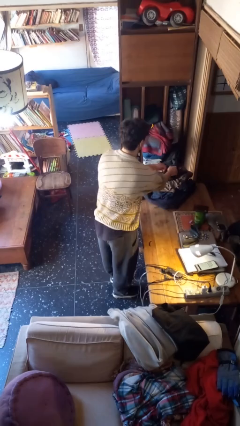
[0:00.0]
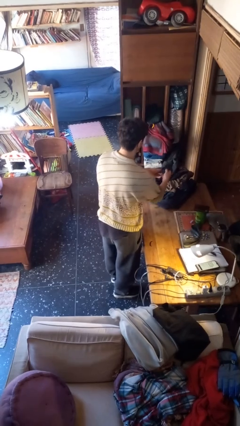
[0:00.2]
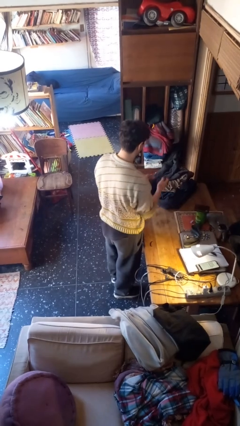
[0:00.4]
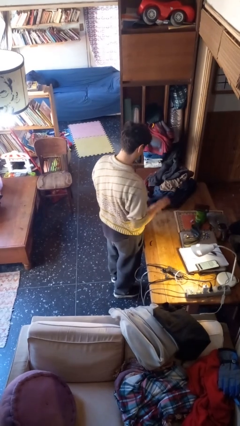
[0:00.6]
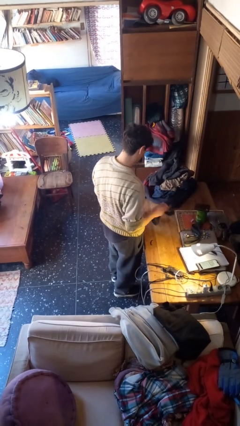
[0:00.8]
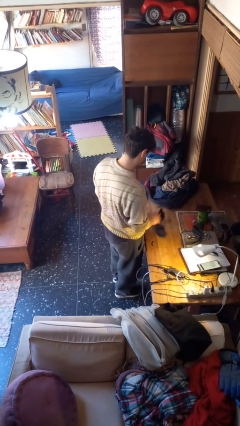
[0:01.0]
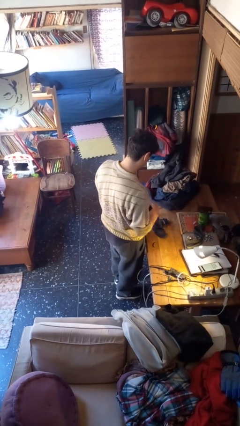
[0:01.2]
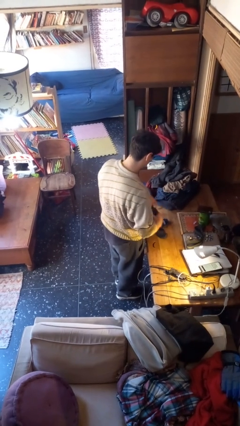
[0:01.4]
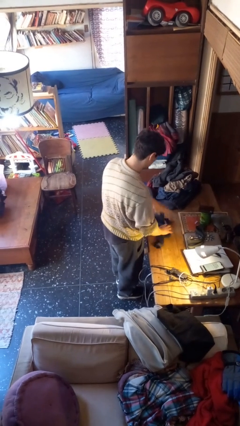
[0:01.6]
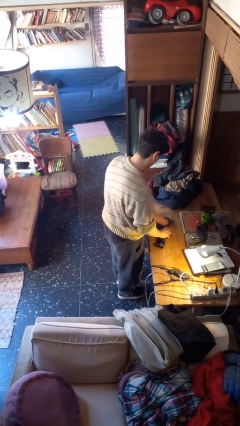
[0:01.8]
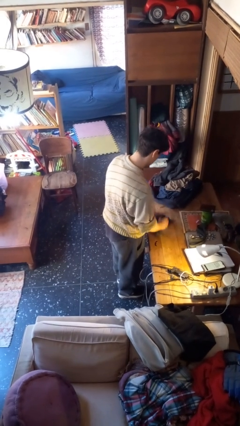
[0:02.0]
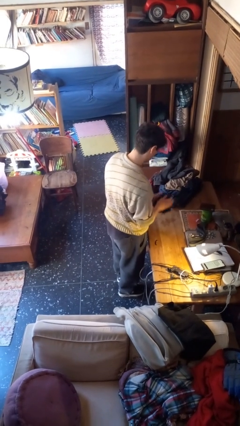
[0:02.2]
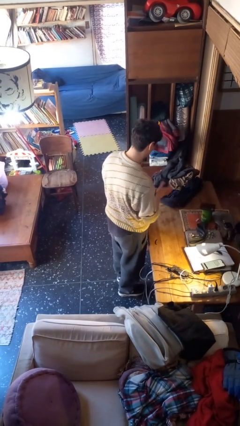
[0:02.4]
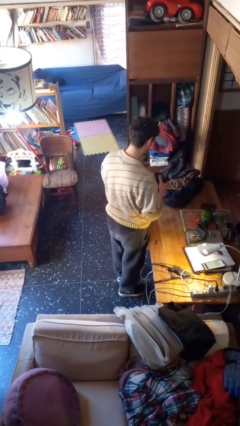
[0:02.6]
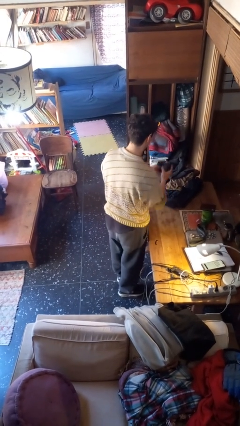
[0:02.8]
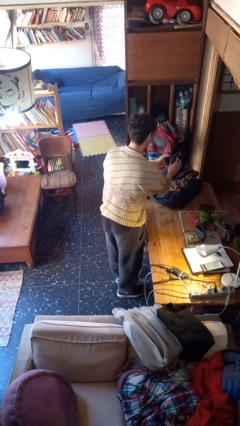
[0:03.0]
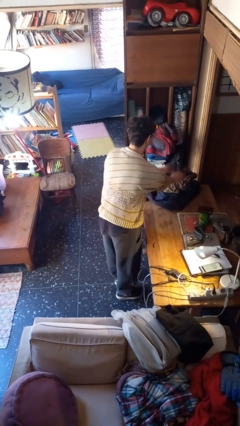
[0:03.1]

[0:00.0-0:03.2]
person folds socks

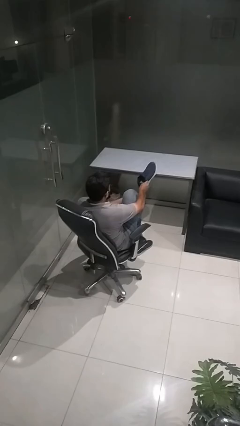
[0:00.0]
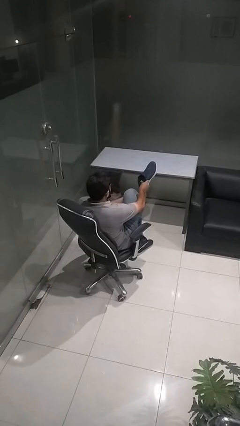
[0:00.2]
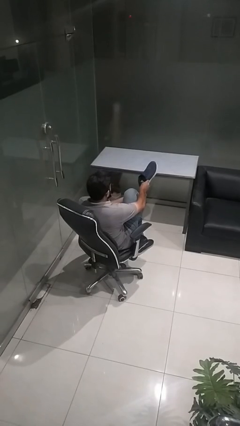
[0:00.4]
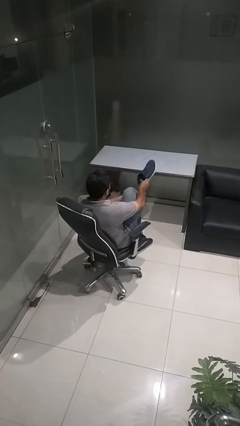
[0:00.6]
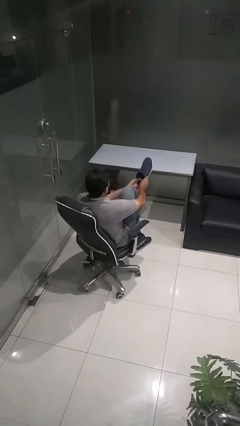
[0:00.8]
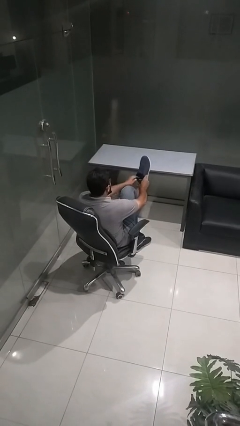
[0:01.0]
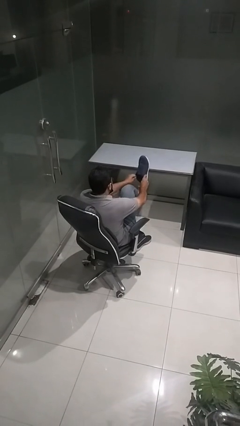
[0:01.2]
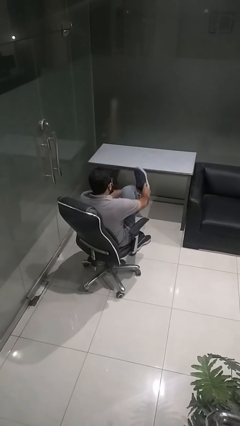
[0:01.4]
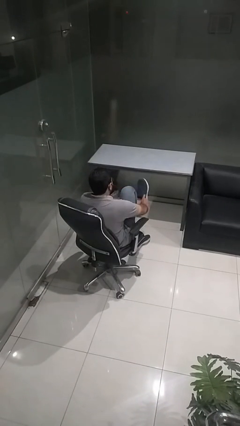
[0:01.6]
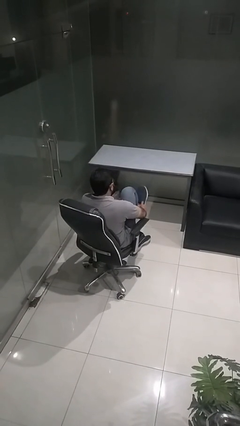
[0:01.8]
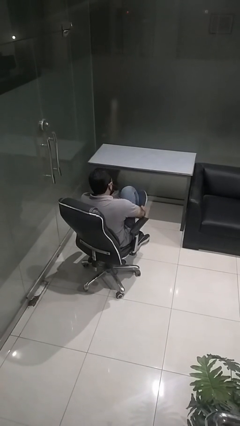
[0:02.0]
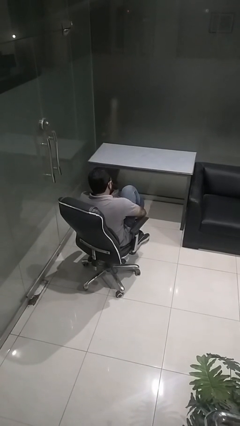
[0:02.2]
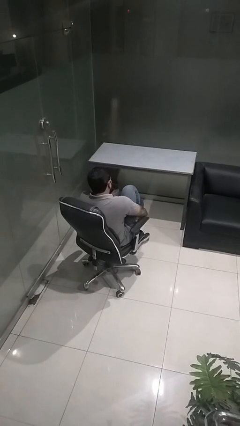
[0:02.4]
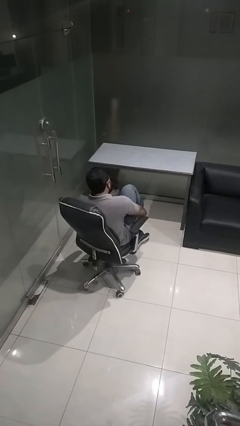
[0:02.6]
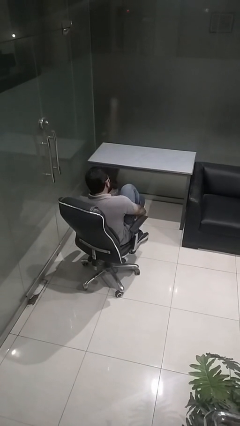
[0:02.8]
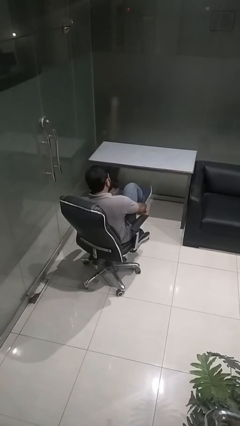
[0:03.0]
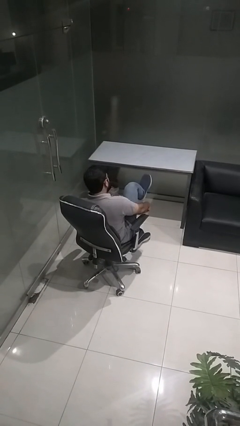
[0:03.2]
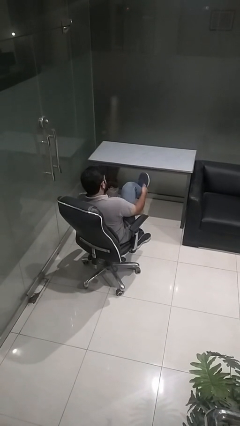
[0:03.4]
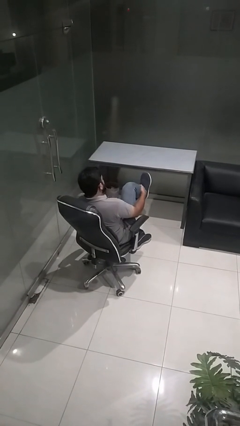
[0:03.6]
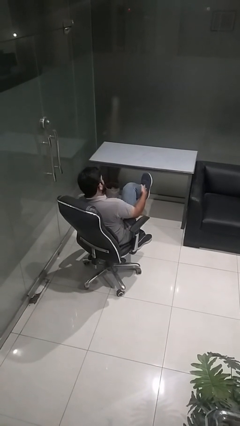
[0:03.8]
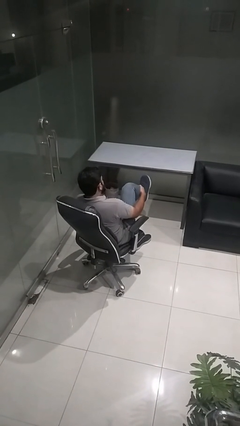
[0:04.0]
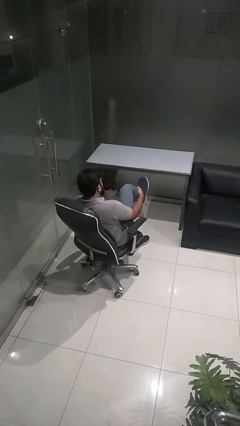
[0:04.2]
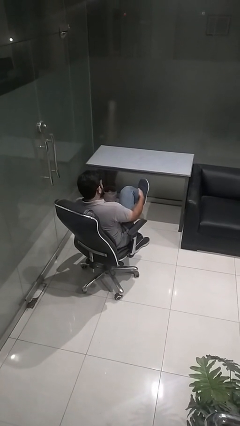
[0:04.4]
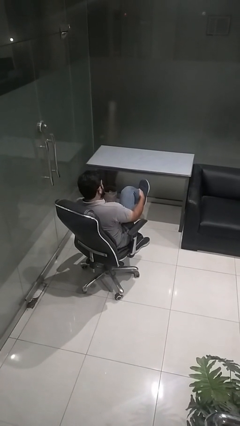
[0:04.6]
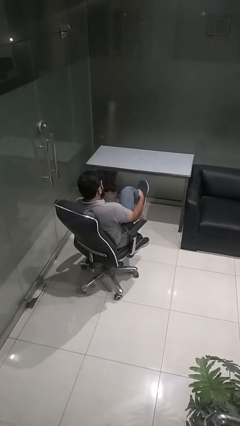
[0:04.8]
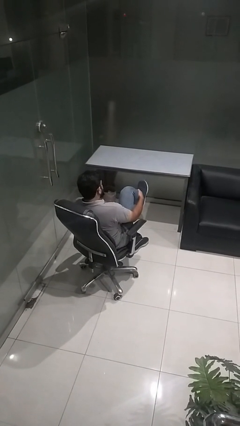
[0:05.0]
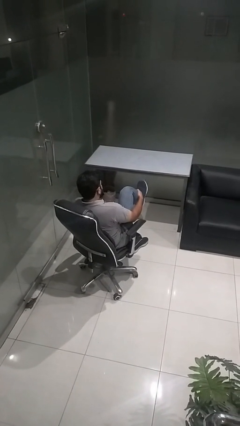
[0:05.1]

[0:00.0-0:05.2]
person puts on shoes

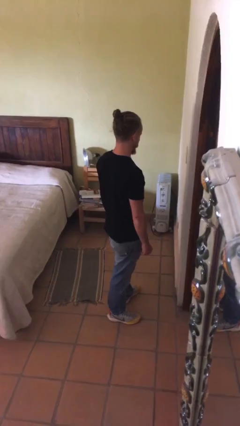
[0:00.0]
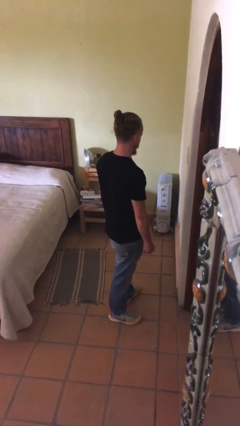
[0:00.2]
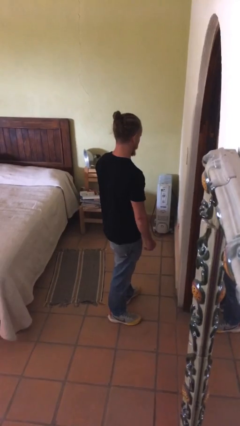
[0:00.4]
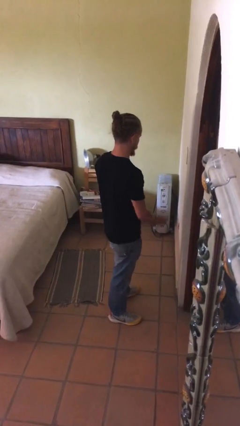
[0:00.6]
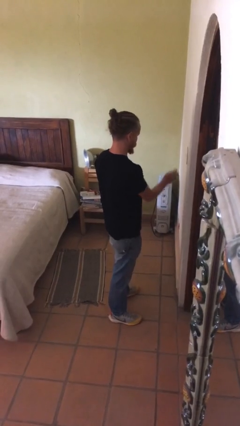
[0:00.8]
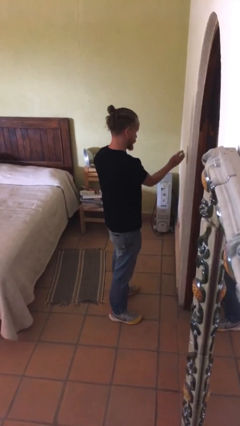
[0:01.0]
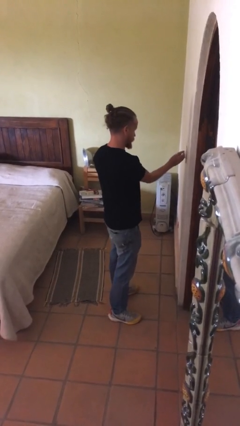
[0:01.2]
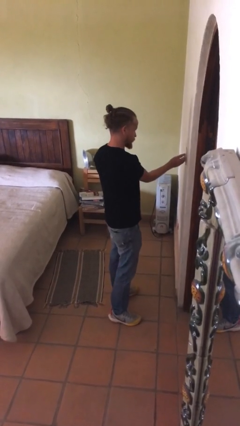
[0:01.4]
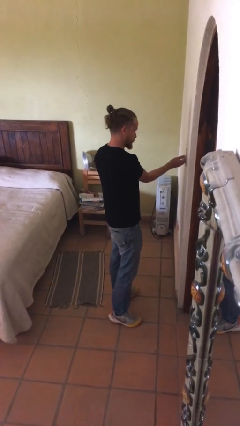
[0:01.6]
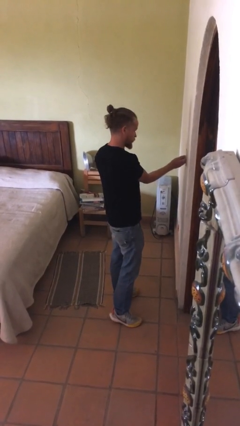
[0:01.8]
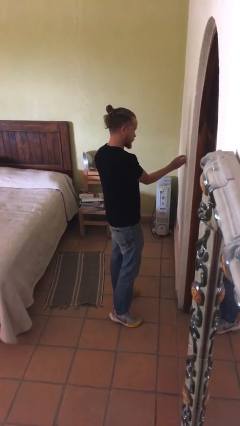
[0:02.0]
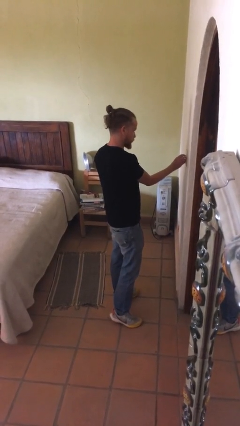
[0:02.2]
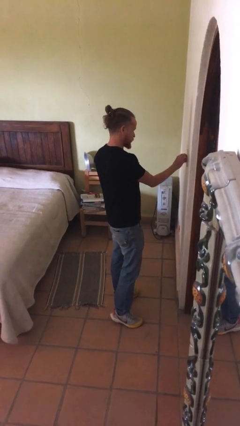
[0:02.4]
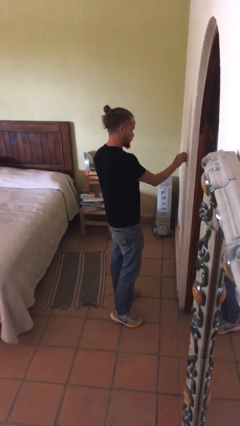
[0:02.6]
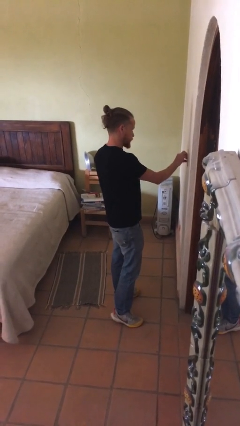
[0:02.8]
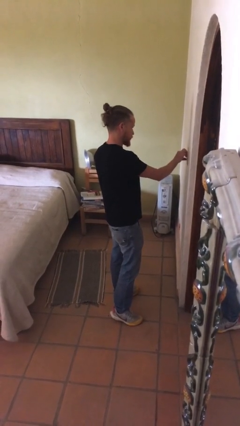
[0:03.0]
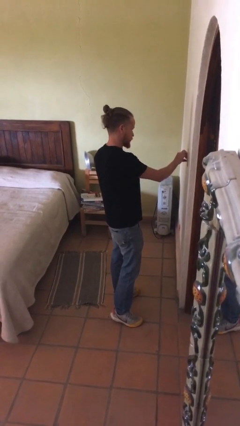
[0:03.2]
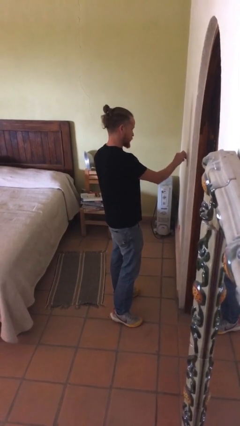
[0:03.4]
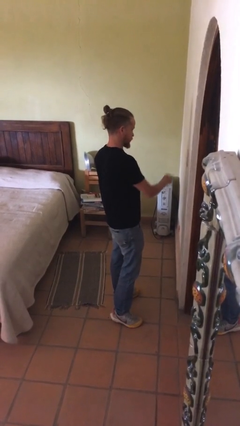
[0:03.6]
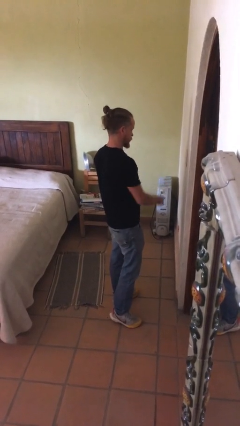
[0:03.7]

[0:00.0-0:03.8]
person adjusts thermostat

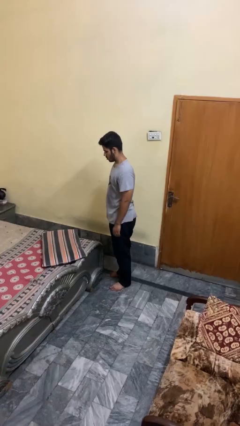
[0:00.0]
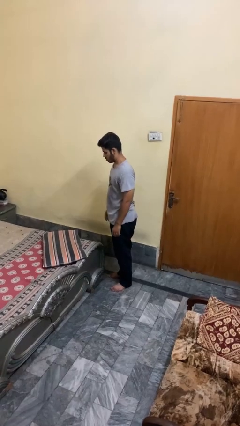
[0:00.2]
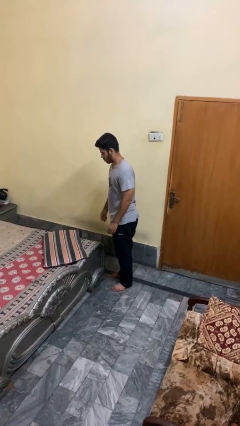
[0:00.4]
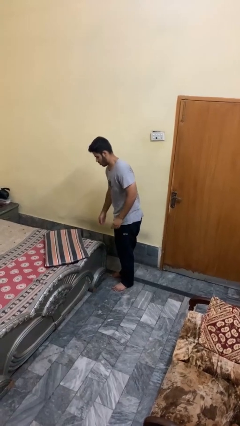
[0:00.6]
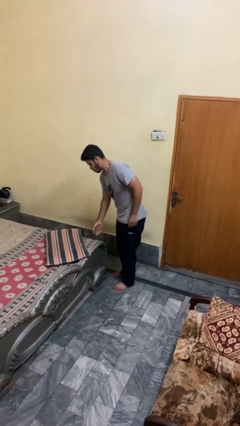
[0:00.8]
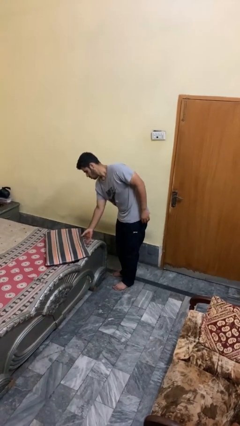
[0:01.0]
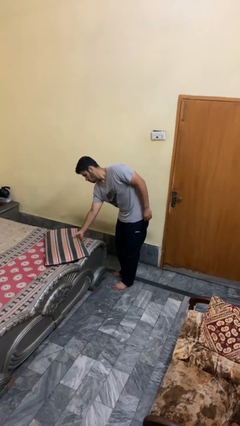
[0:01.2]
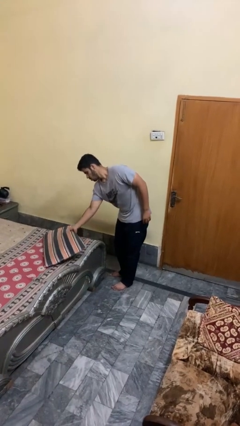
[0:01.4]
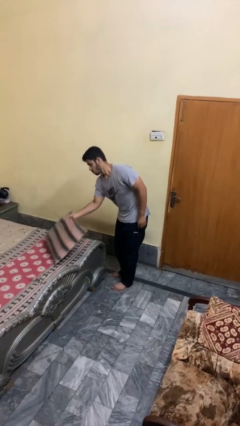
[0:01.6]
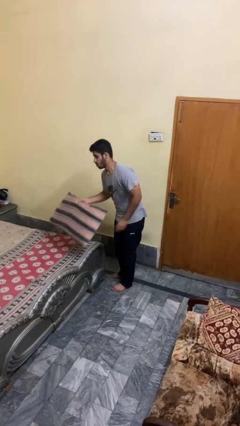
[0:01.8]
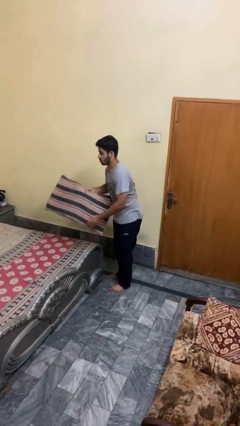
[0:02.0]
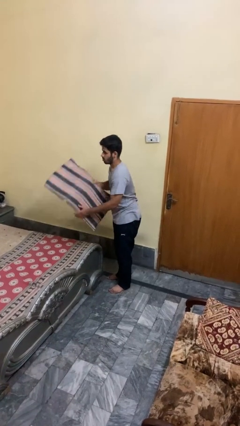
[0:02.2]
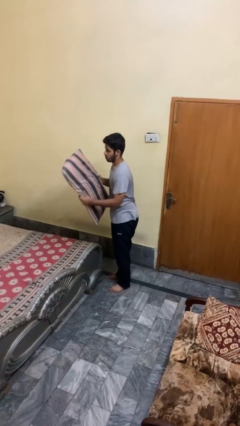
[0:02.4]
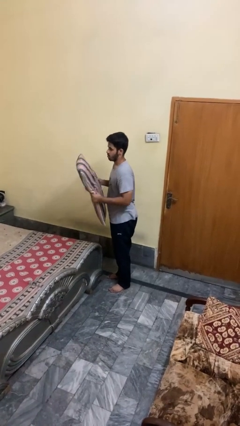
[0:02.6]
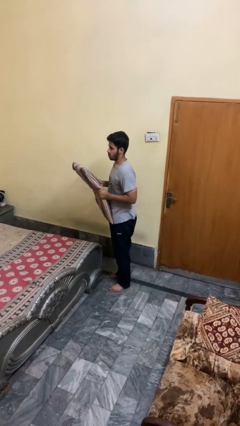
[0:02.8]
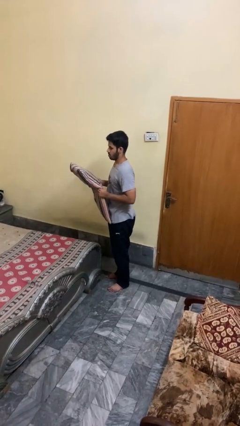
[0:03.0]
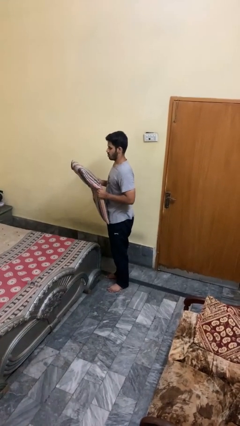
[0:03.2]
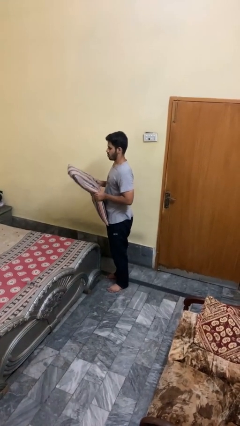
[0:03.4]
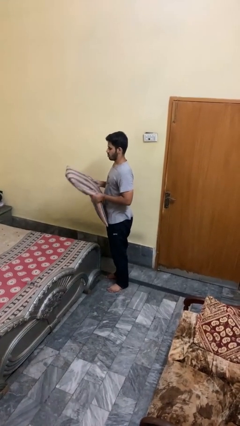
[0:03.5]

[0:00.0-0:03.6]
person picks up object from bed

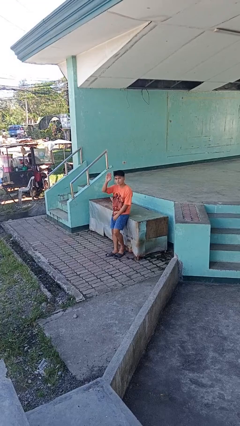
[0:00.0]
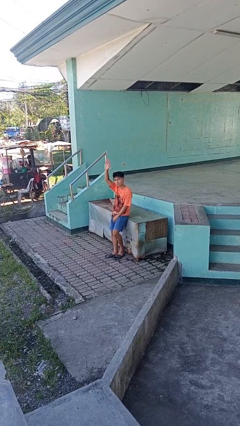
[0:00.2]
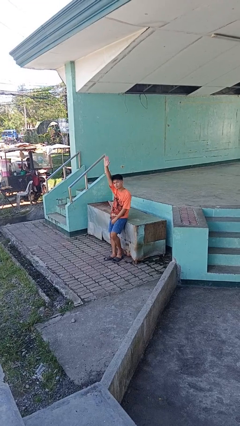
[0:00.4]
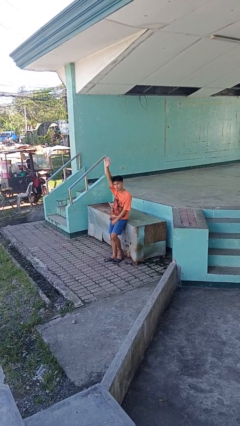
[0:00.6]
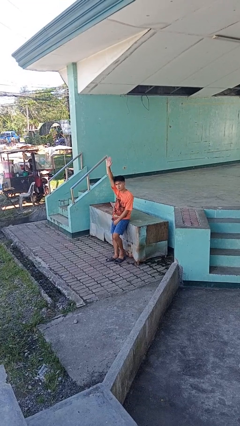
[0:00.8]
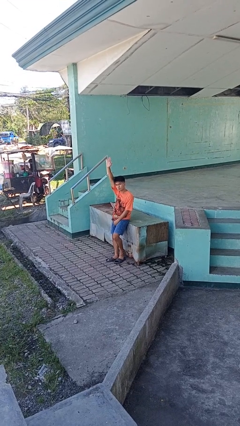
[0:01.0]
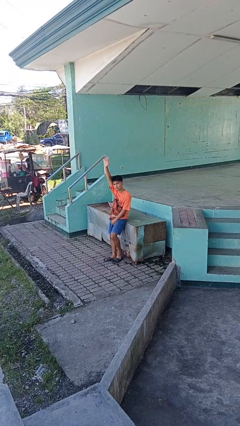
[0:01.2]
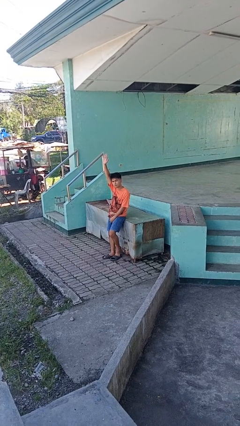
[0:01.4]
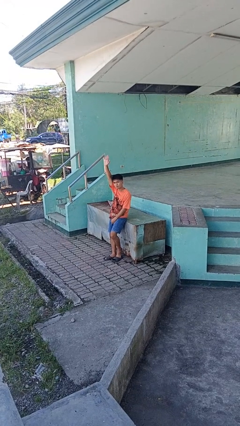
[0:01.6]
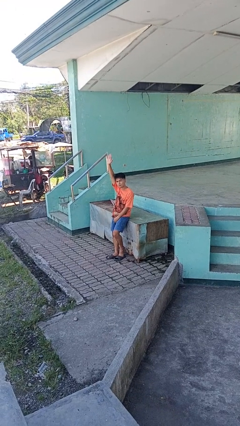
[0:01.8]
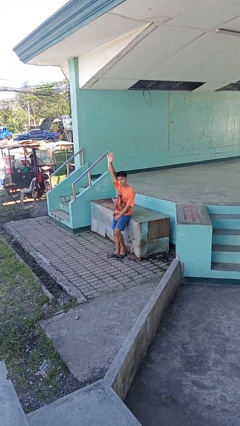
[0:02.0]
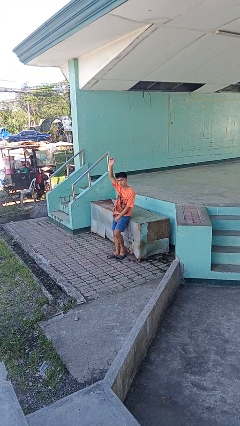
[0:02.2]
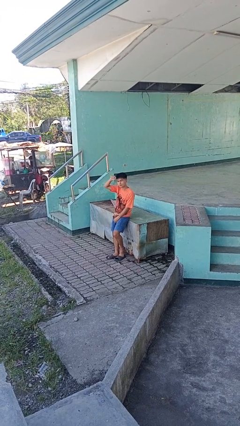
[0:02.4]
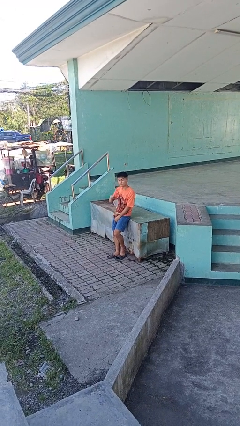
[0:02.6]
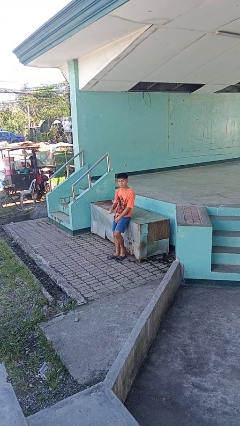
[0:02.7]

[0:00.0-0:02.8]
person gestures raise hand
